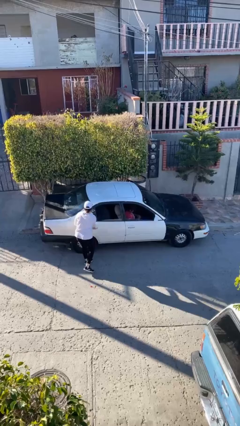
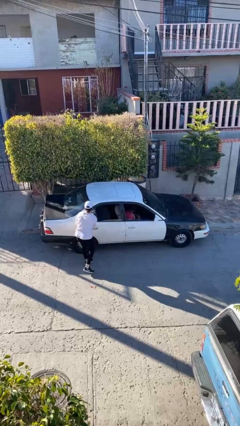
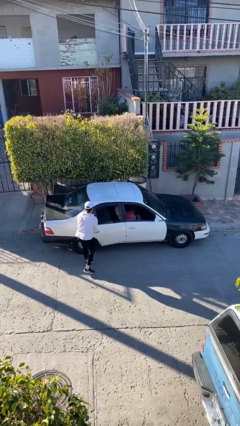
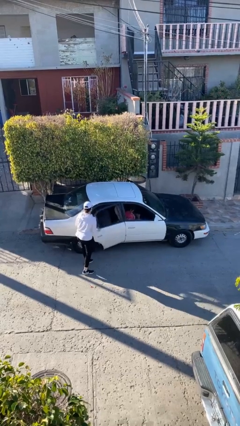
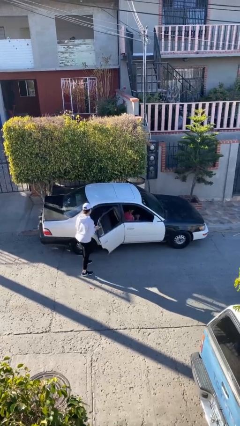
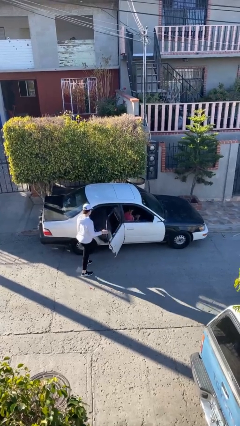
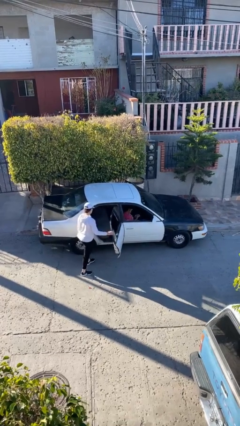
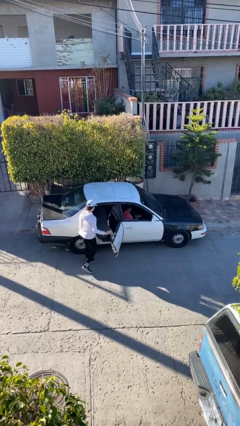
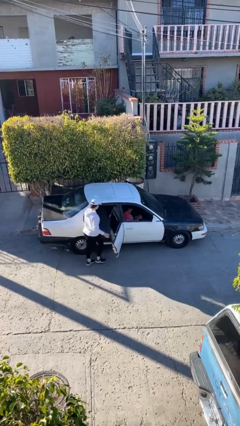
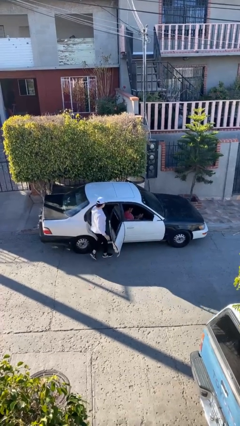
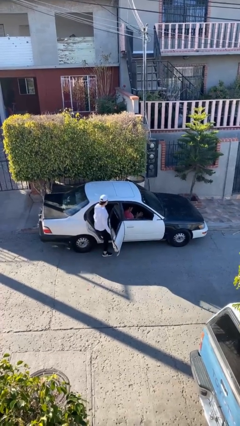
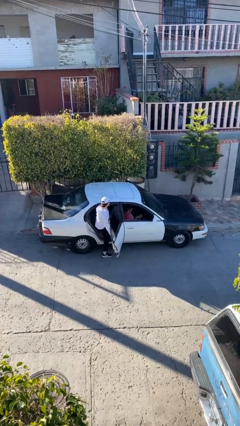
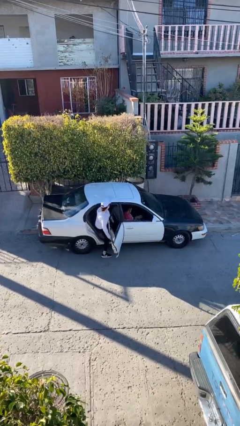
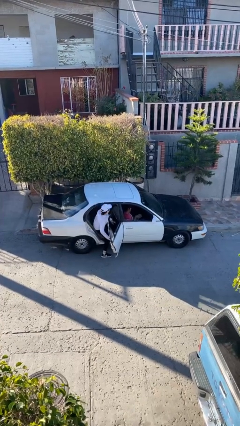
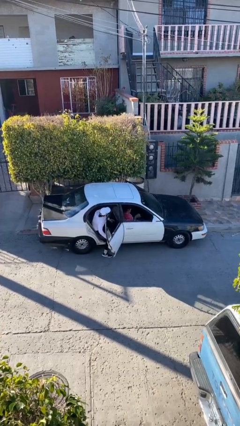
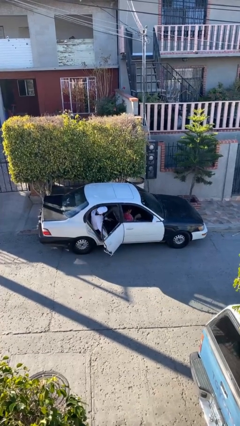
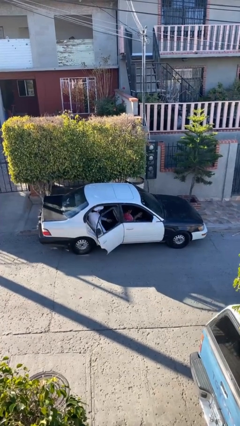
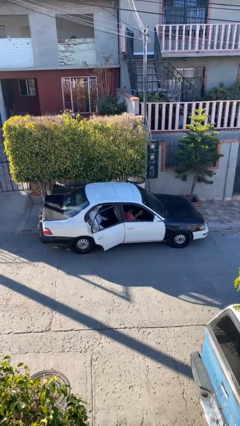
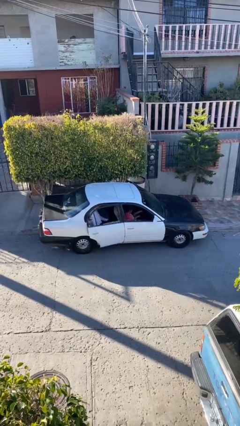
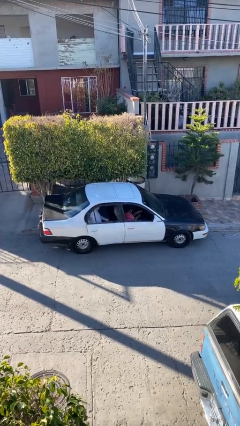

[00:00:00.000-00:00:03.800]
car picks up person

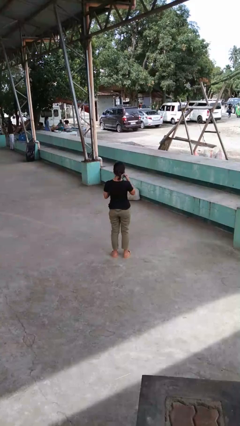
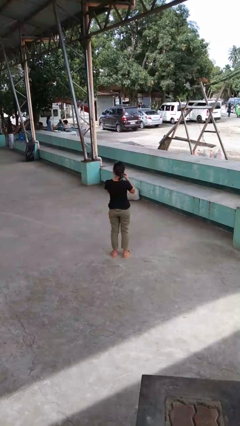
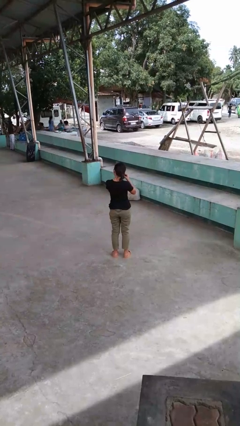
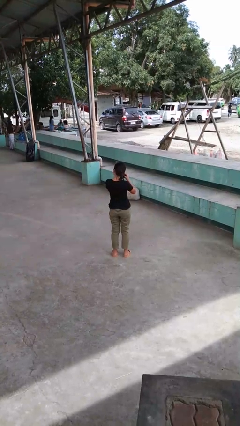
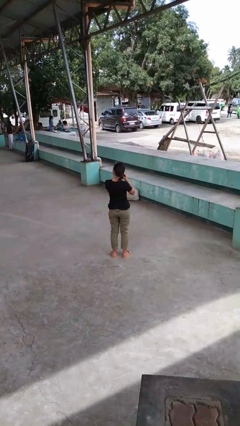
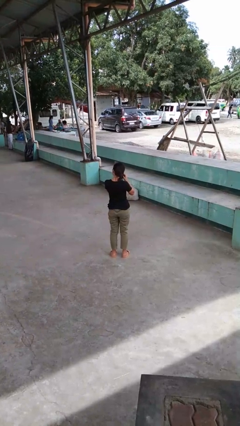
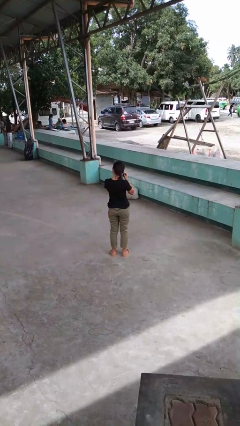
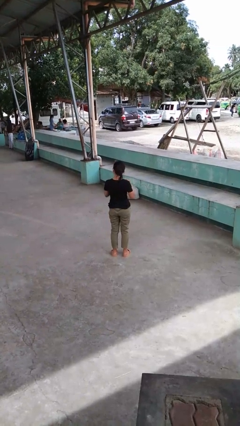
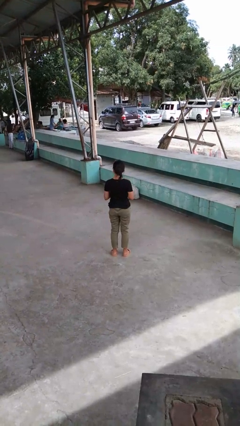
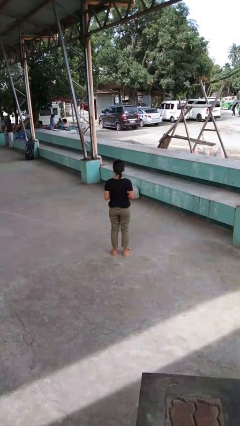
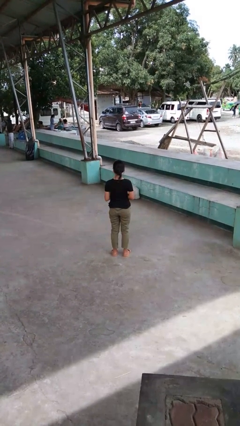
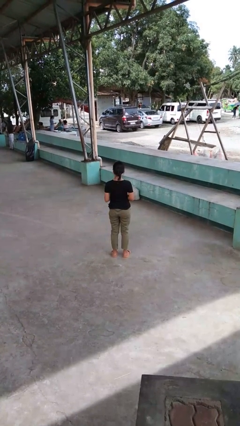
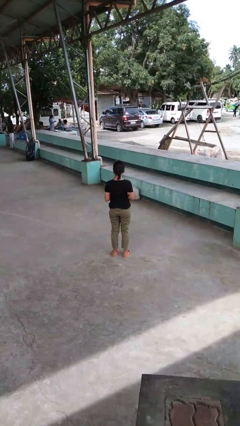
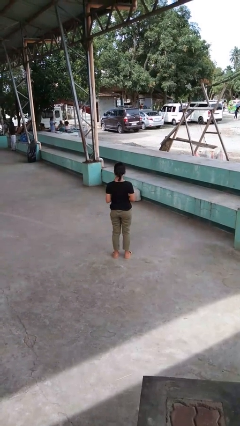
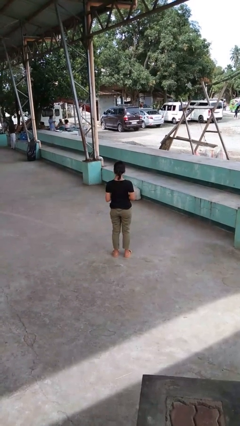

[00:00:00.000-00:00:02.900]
person takes off earrings

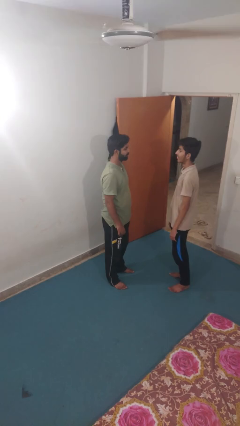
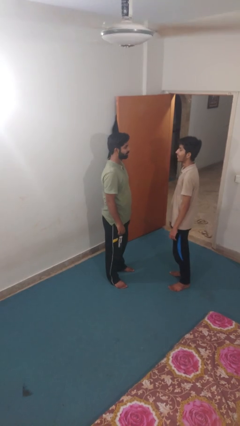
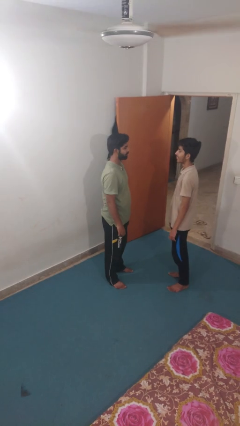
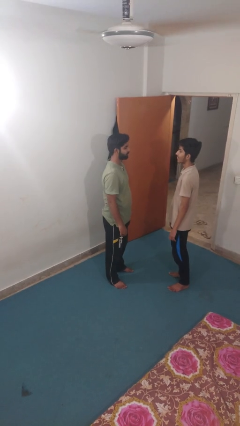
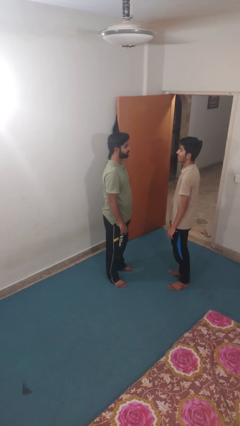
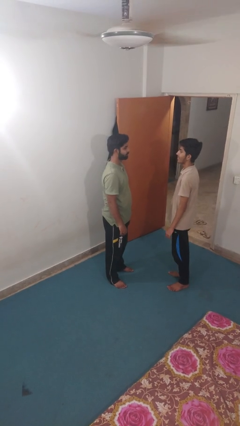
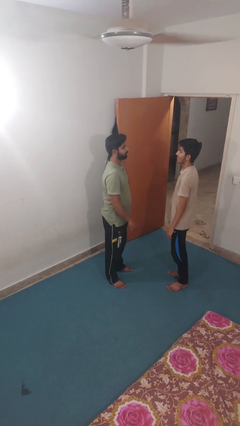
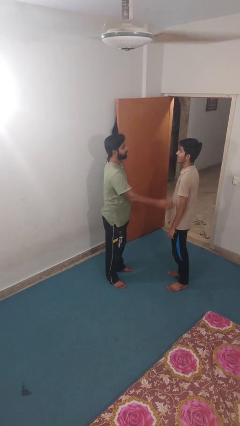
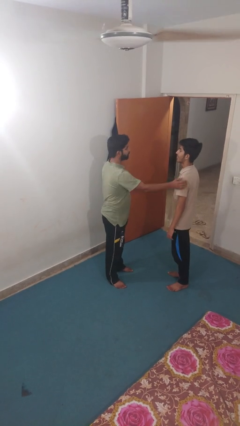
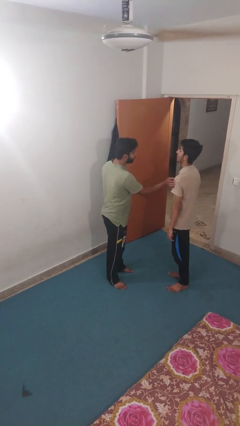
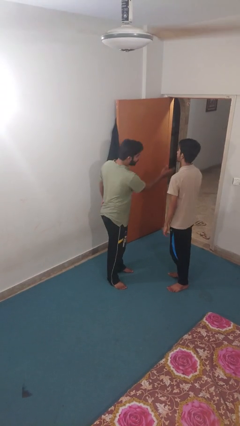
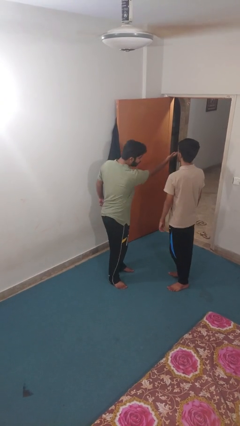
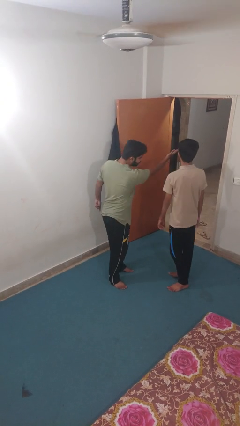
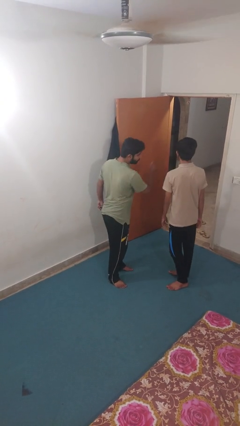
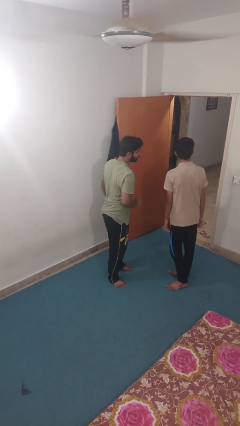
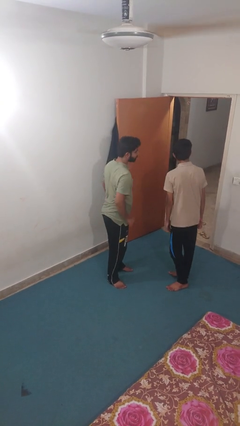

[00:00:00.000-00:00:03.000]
person shoves person

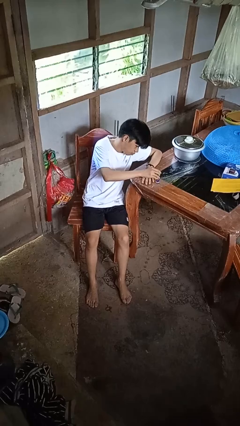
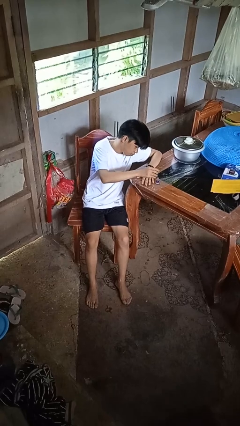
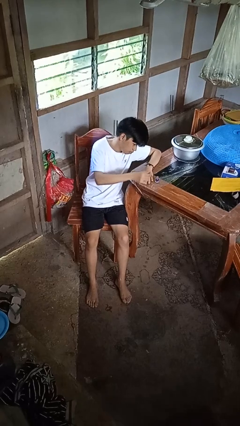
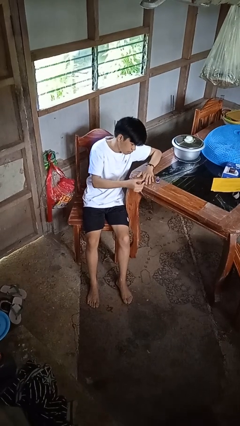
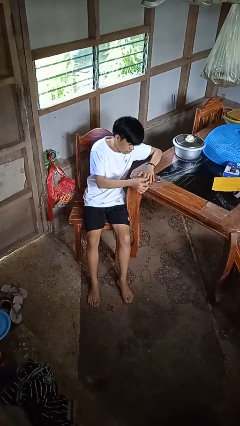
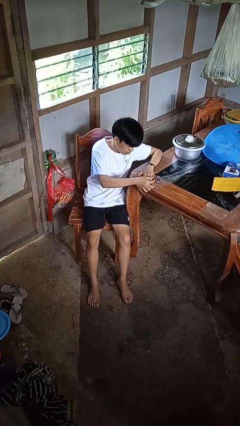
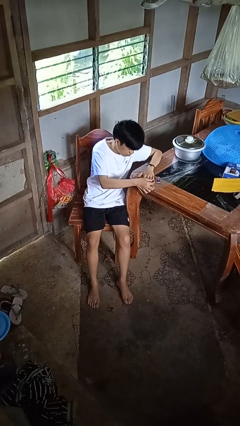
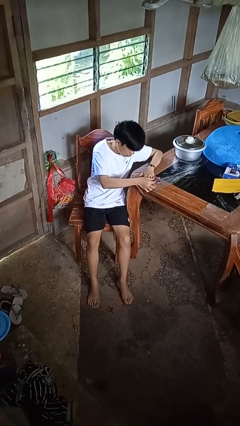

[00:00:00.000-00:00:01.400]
person paints fingernails

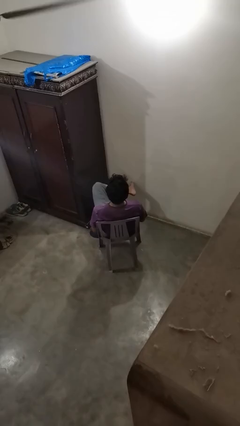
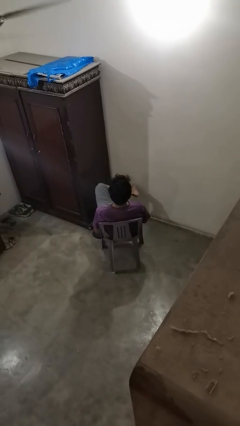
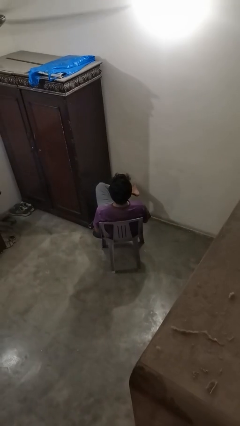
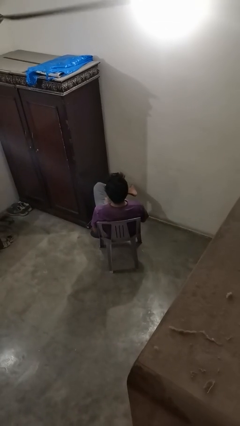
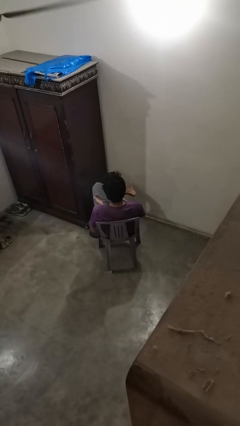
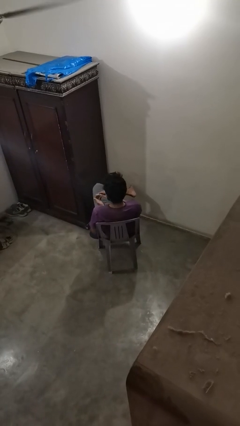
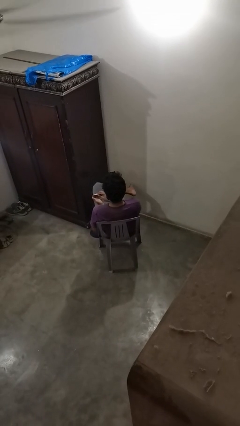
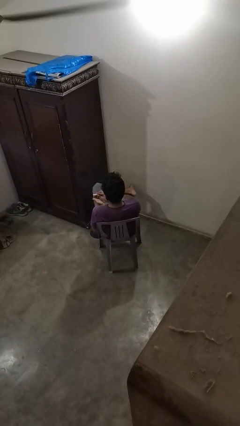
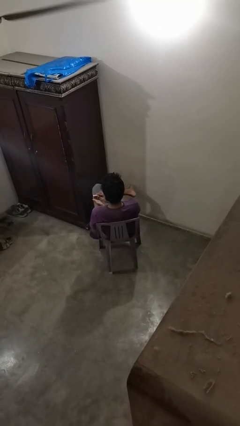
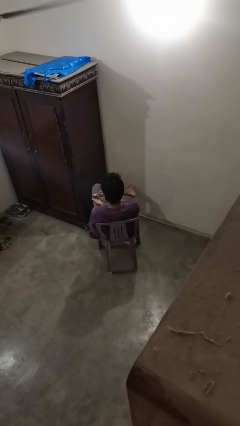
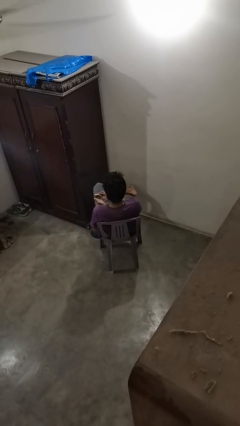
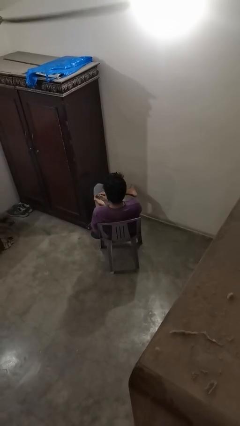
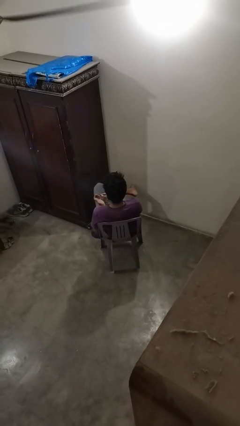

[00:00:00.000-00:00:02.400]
person files fingernails

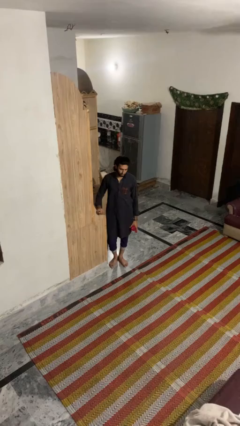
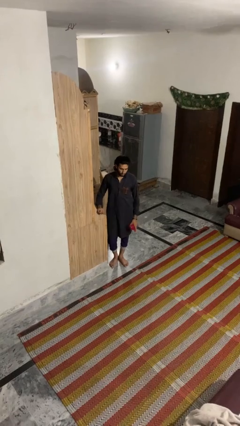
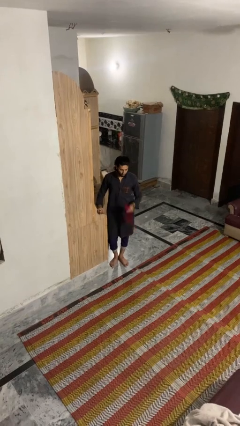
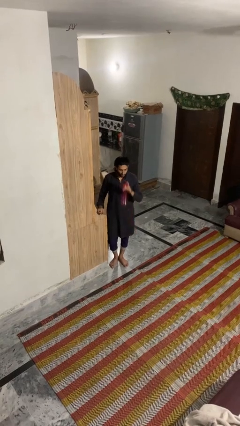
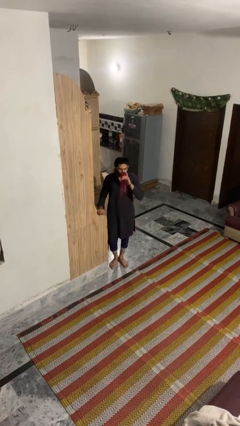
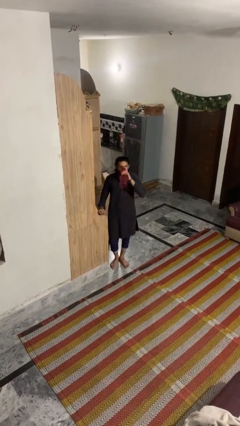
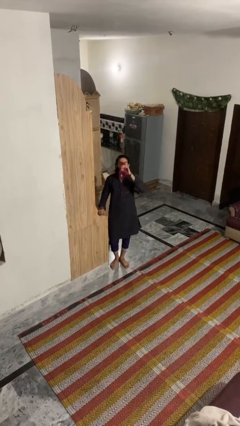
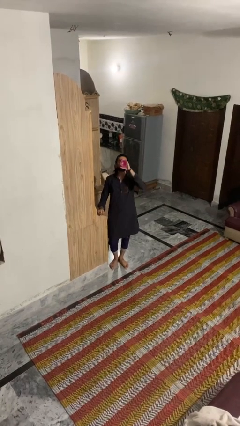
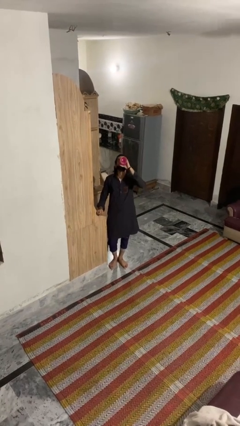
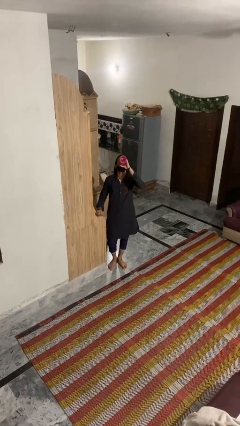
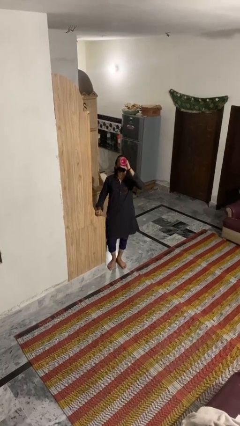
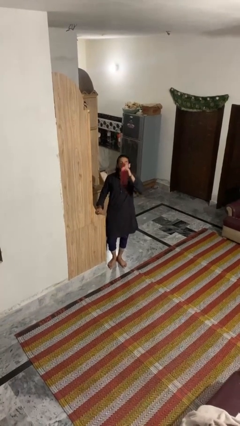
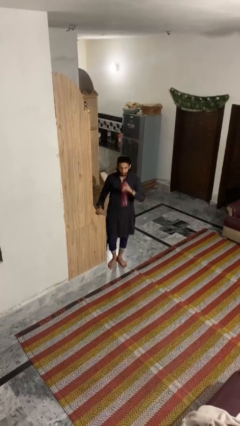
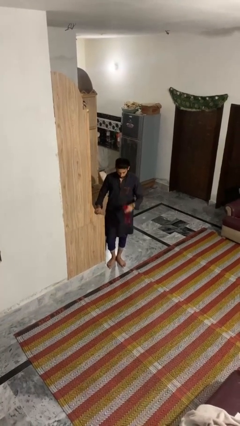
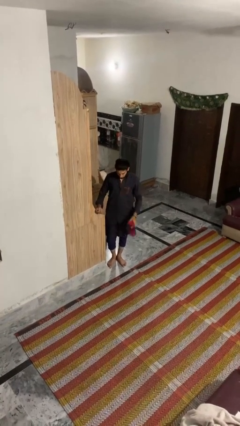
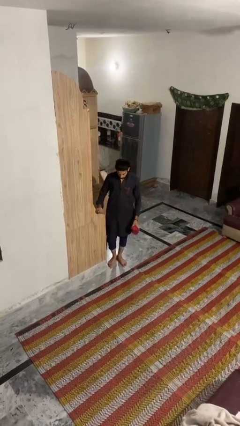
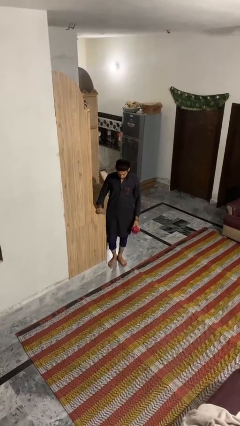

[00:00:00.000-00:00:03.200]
person drinks from bottle

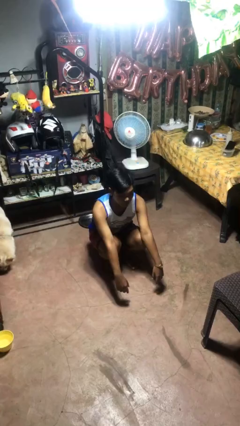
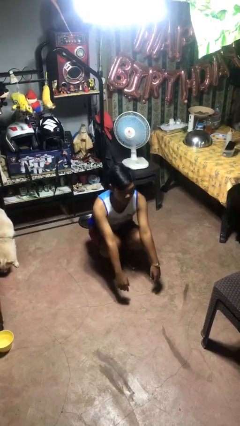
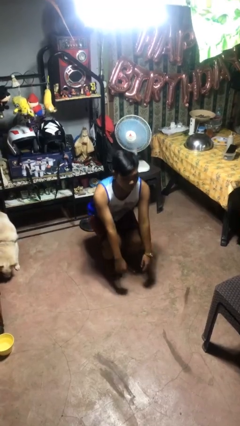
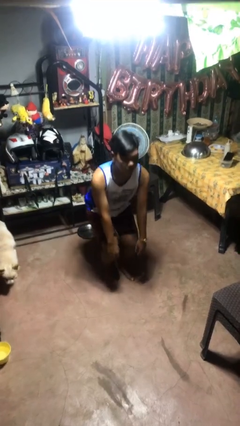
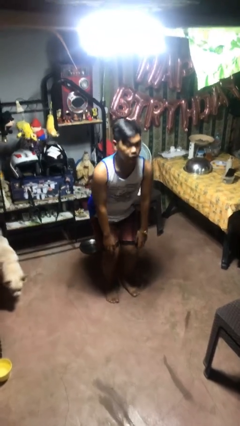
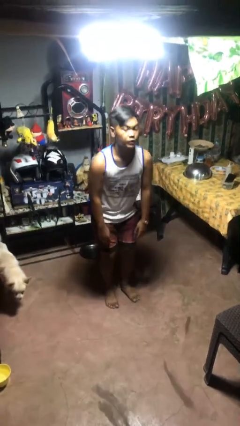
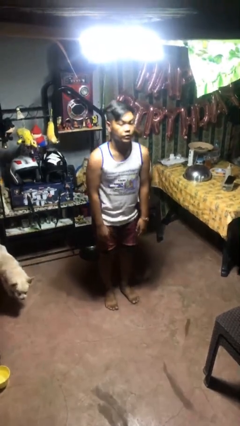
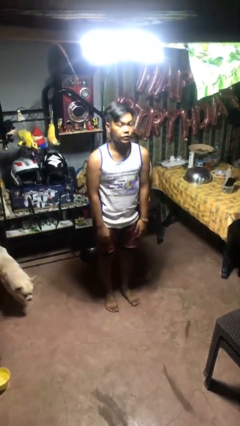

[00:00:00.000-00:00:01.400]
person stands up
